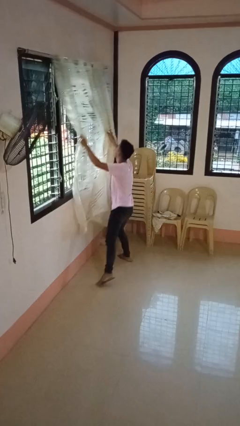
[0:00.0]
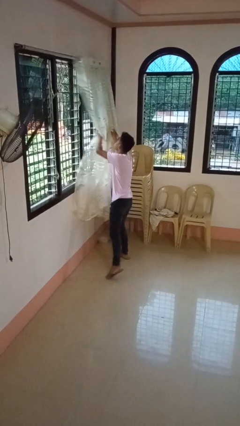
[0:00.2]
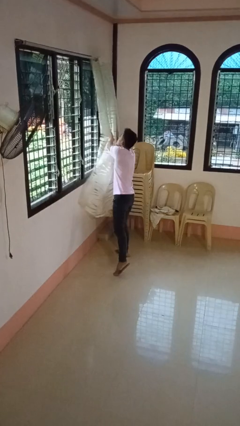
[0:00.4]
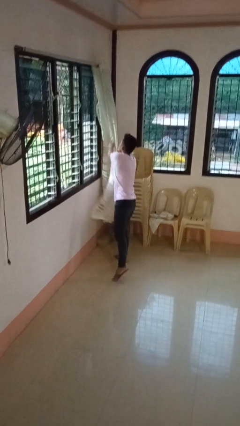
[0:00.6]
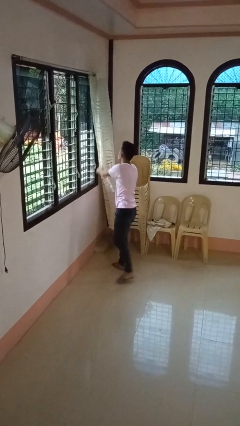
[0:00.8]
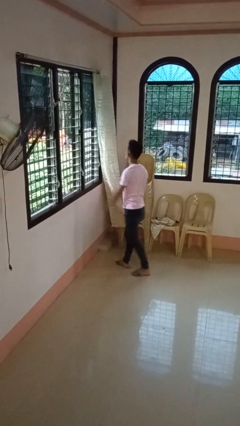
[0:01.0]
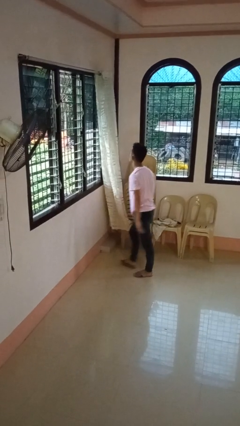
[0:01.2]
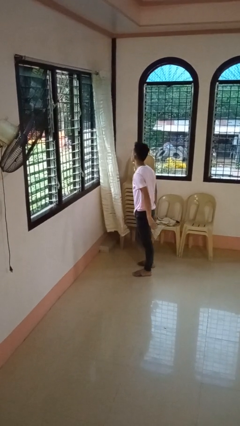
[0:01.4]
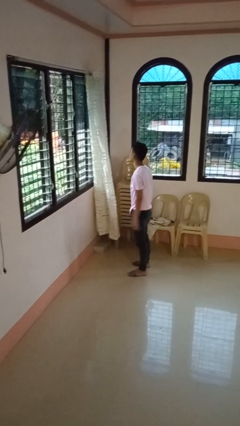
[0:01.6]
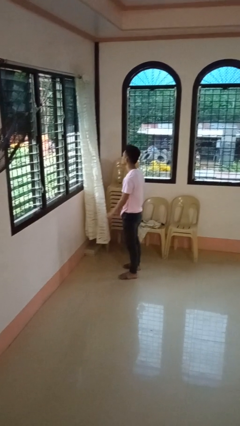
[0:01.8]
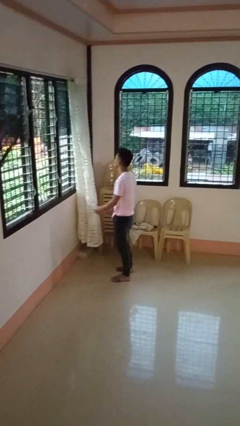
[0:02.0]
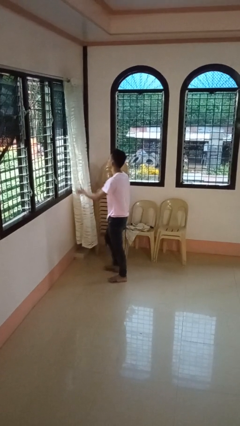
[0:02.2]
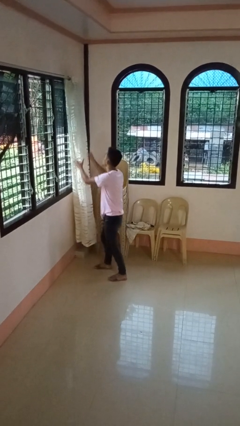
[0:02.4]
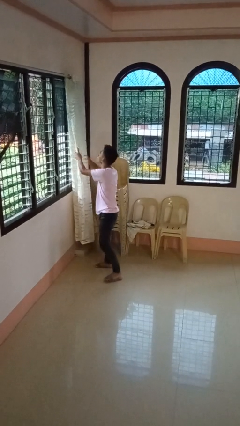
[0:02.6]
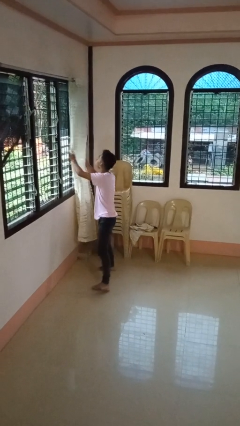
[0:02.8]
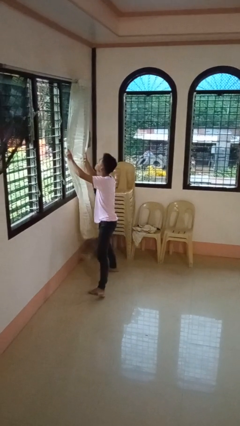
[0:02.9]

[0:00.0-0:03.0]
person opens curtains

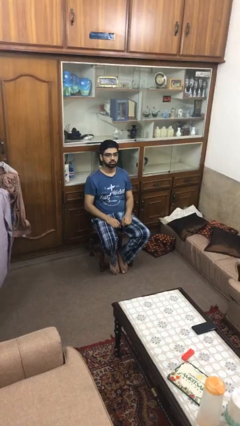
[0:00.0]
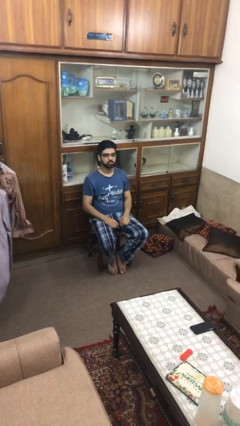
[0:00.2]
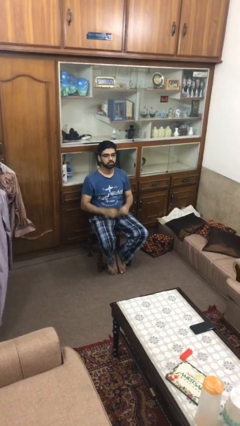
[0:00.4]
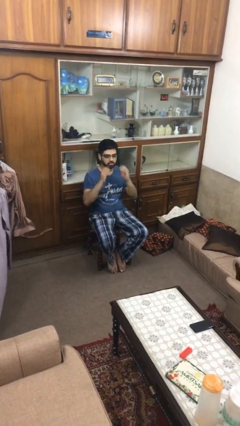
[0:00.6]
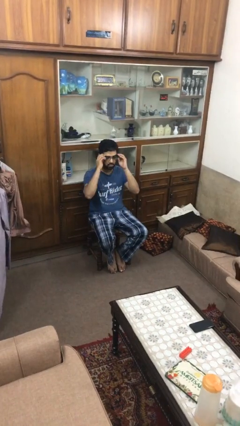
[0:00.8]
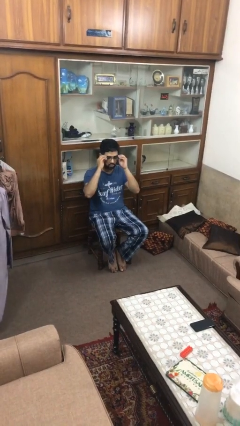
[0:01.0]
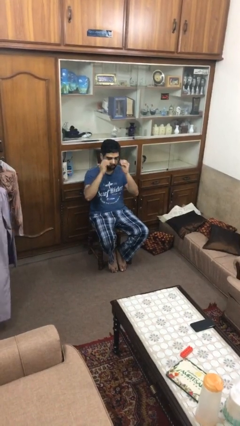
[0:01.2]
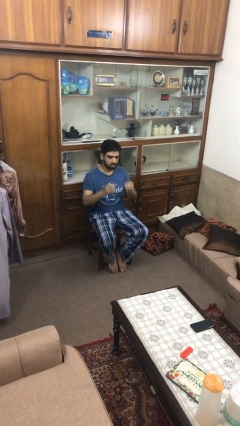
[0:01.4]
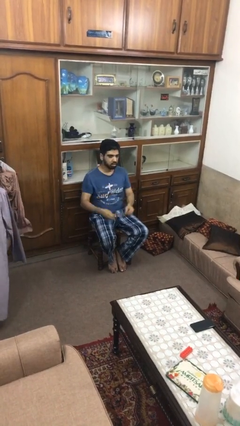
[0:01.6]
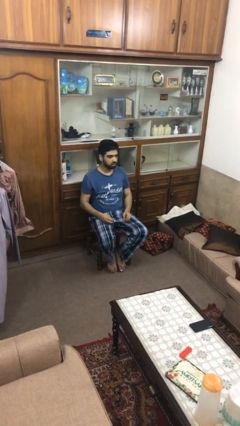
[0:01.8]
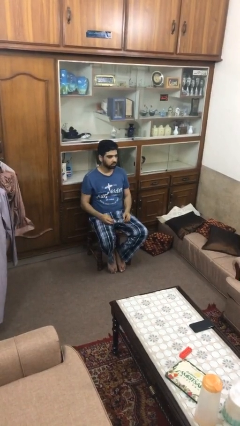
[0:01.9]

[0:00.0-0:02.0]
person takes off glasses

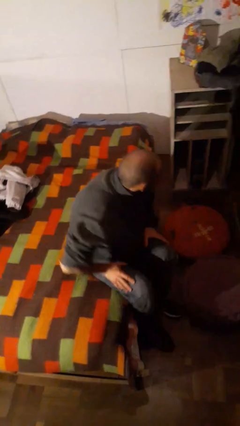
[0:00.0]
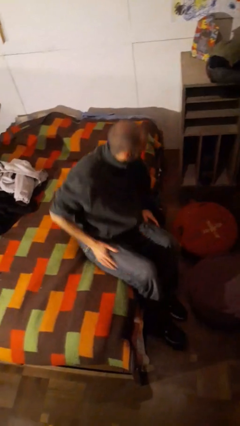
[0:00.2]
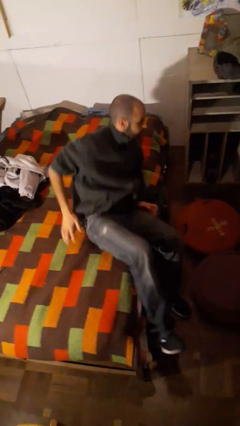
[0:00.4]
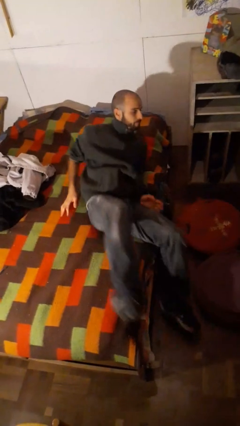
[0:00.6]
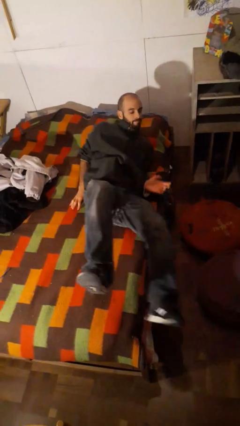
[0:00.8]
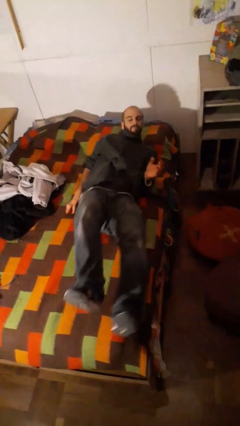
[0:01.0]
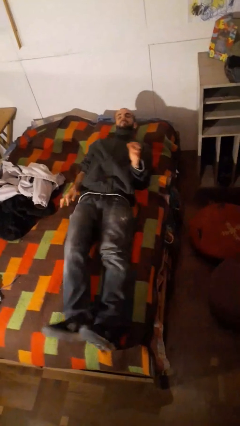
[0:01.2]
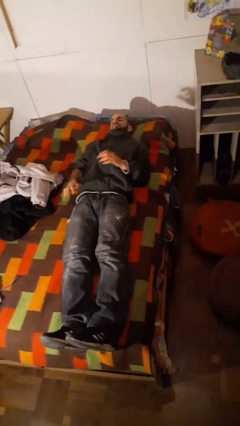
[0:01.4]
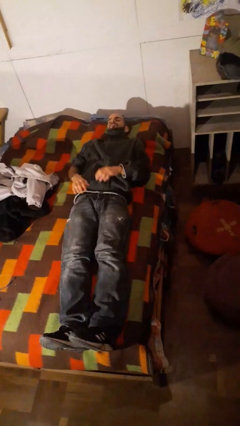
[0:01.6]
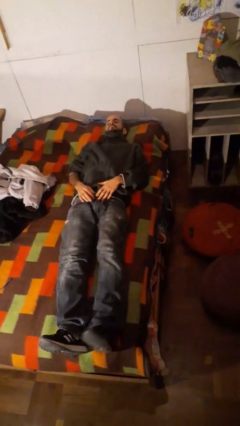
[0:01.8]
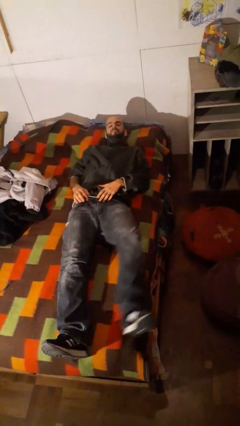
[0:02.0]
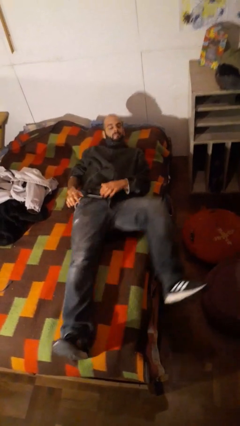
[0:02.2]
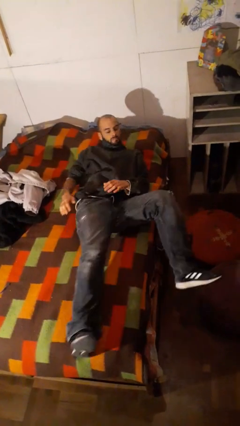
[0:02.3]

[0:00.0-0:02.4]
person lies down on bed

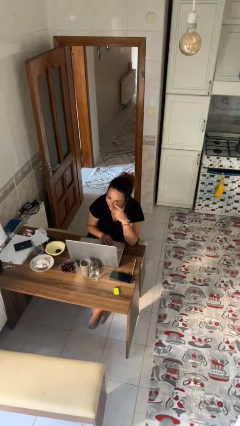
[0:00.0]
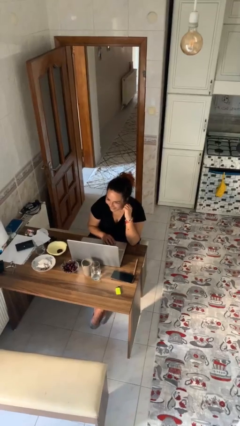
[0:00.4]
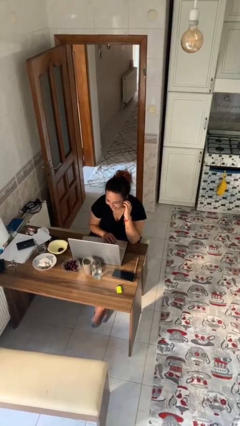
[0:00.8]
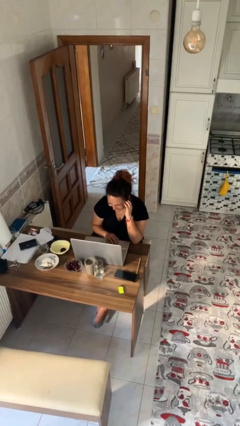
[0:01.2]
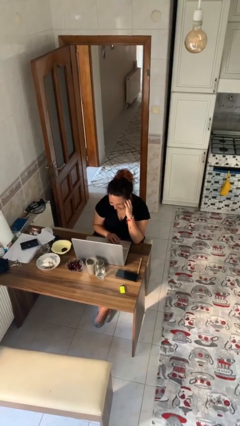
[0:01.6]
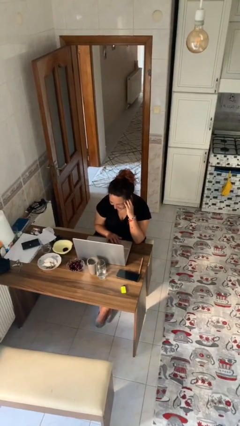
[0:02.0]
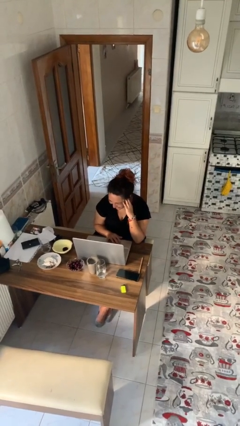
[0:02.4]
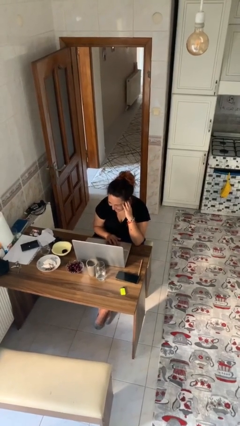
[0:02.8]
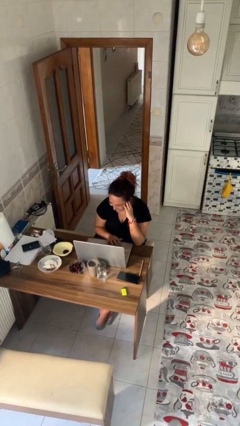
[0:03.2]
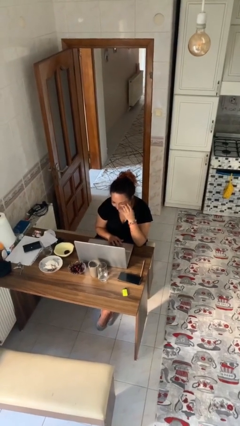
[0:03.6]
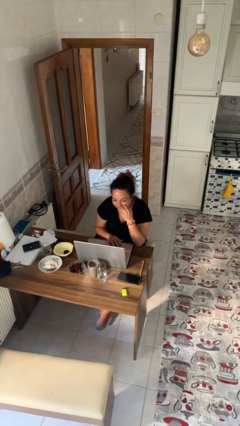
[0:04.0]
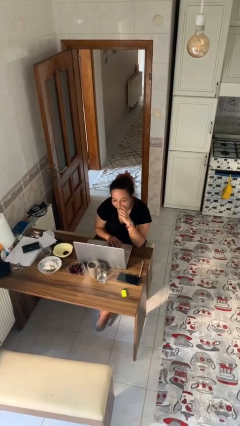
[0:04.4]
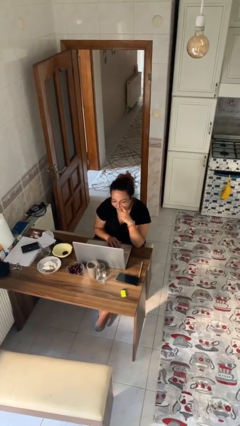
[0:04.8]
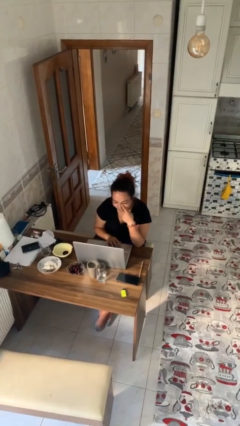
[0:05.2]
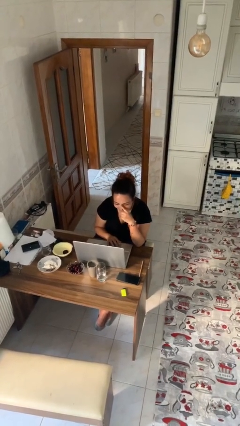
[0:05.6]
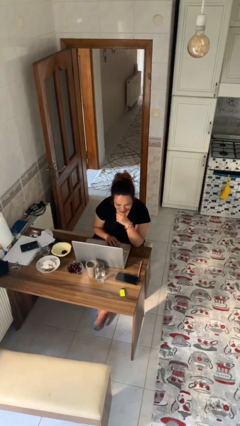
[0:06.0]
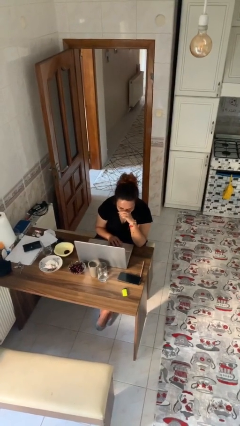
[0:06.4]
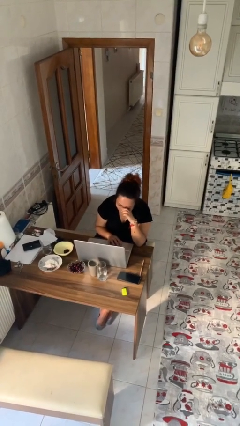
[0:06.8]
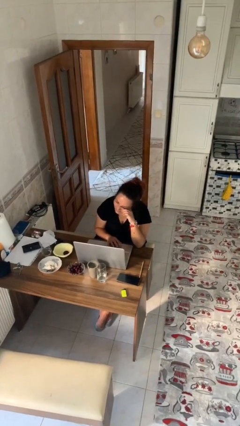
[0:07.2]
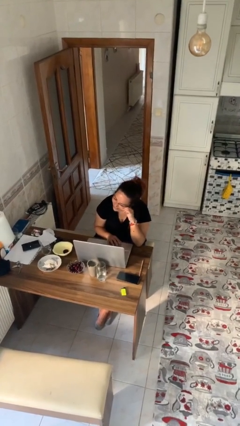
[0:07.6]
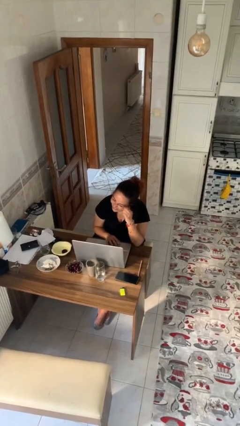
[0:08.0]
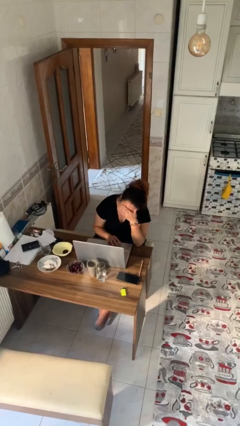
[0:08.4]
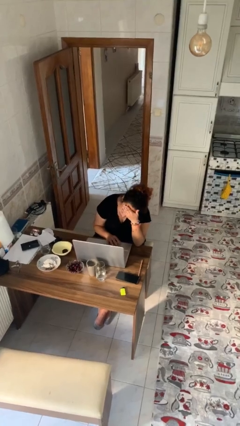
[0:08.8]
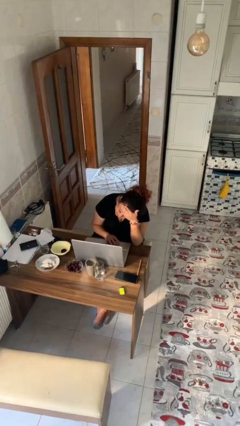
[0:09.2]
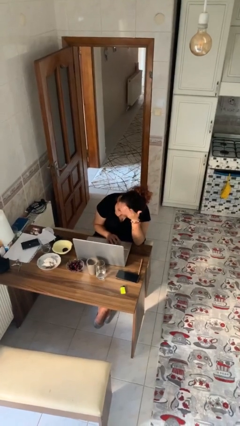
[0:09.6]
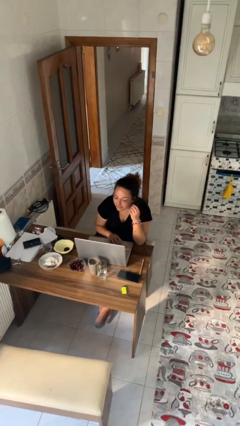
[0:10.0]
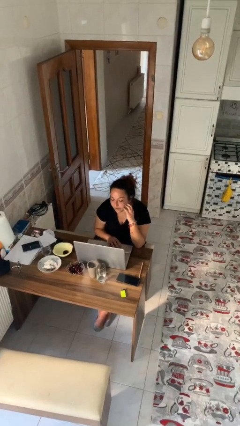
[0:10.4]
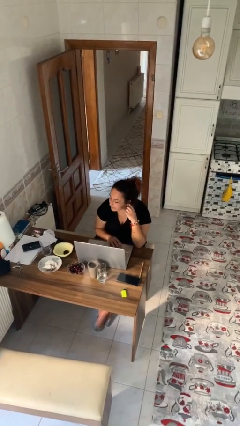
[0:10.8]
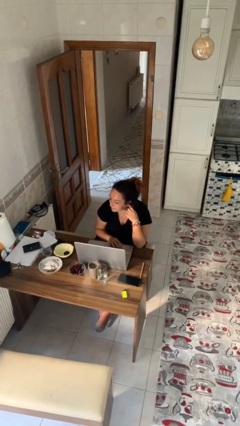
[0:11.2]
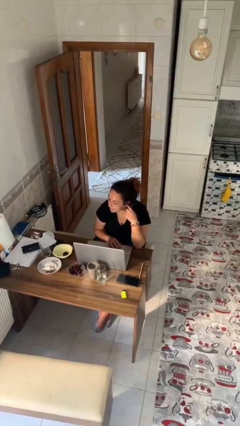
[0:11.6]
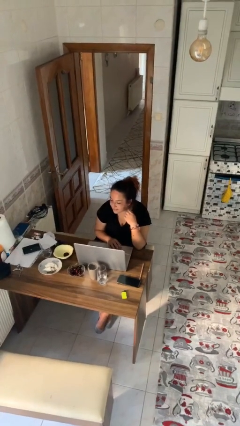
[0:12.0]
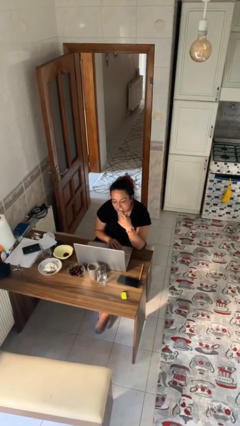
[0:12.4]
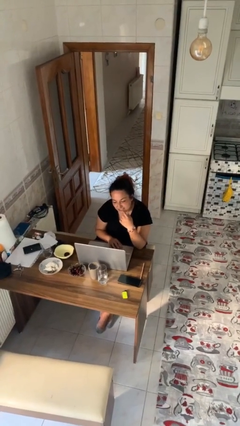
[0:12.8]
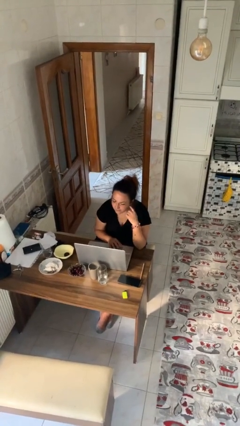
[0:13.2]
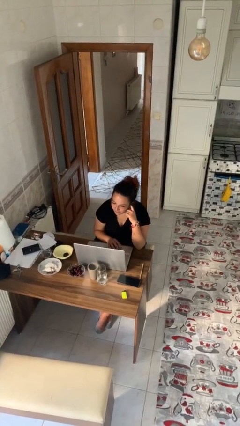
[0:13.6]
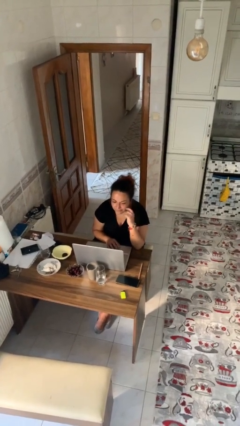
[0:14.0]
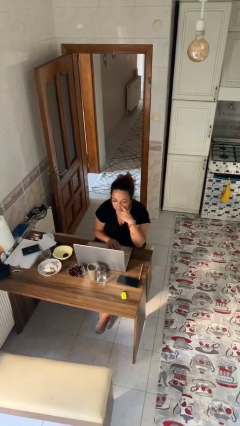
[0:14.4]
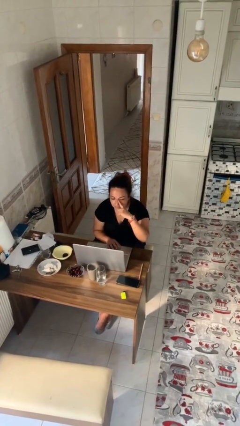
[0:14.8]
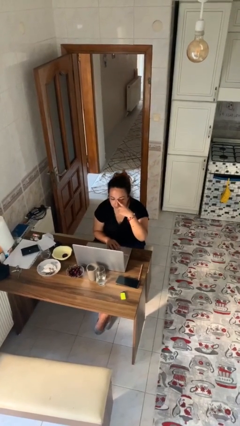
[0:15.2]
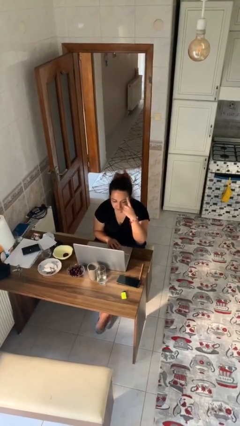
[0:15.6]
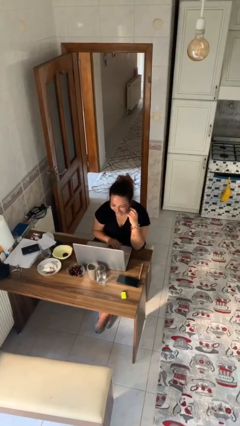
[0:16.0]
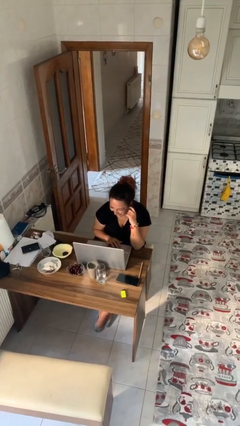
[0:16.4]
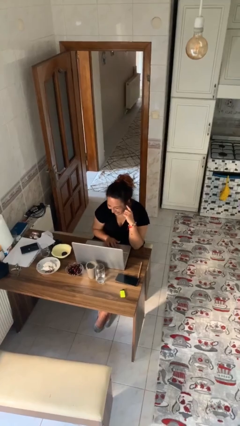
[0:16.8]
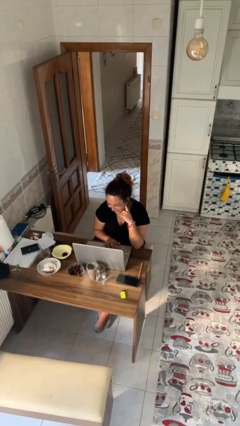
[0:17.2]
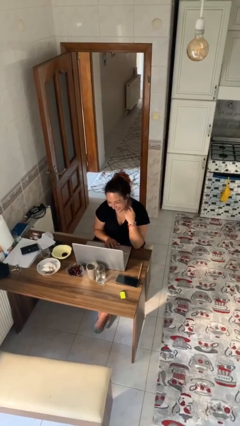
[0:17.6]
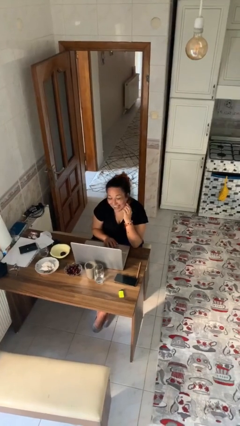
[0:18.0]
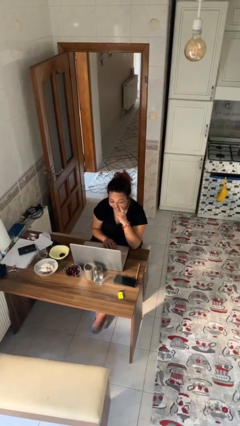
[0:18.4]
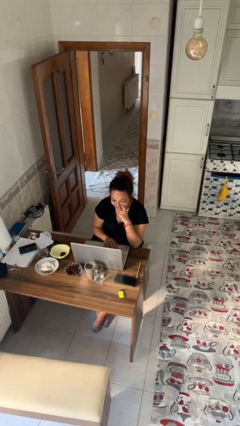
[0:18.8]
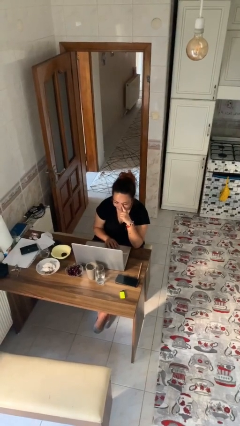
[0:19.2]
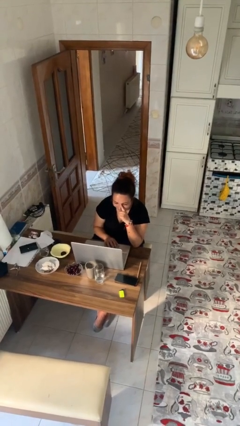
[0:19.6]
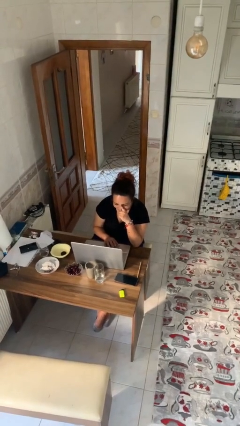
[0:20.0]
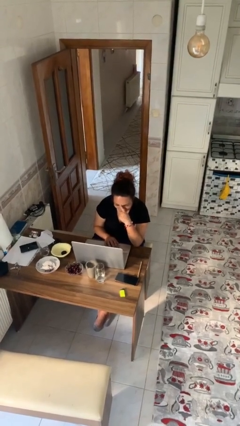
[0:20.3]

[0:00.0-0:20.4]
person interacts with laptop
